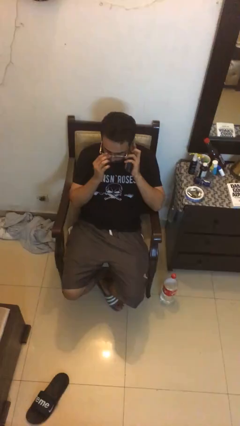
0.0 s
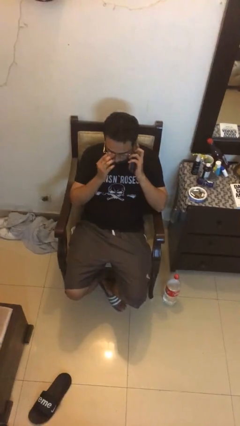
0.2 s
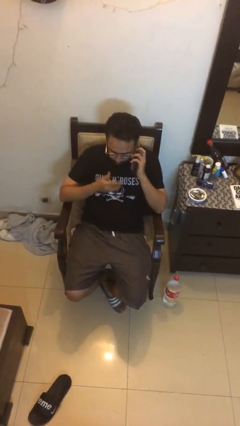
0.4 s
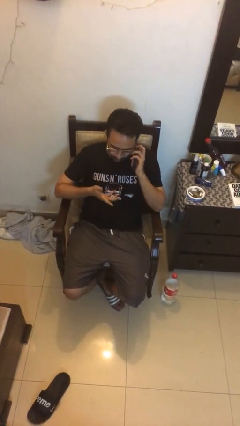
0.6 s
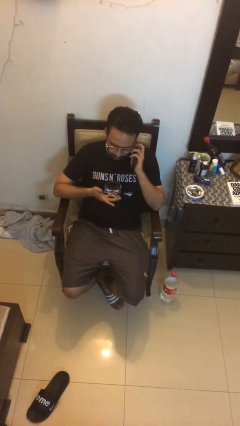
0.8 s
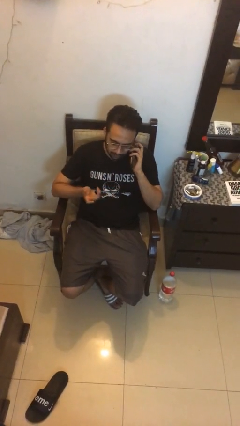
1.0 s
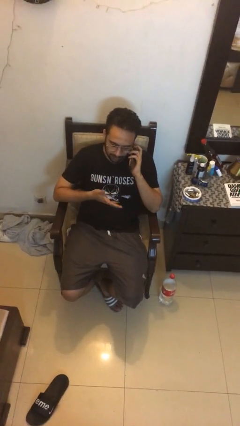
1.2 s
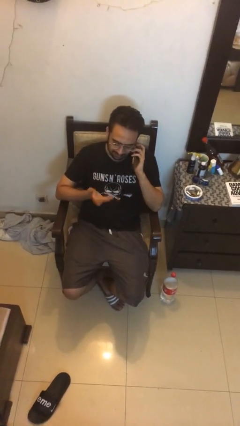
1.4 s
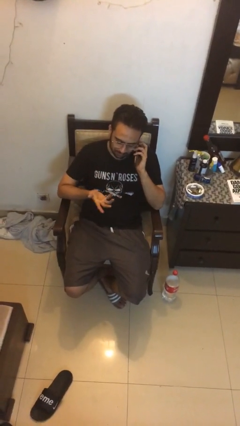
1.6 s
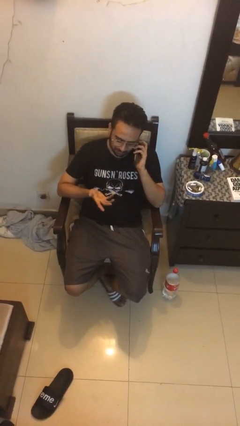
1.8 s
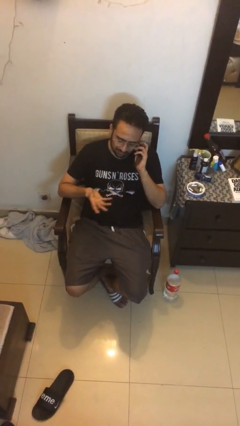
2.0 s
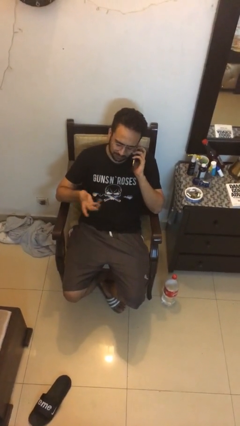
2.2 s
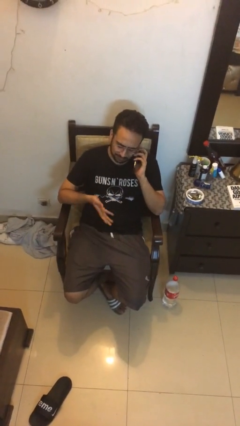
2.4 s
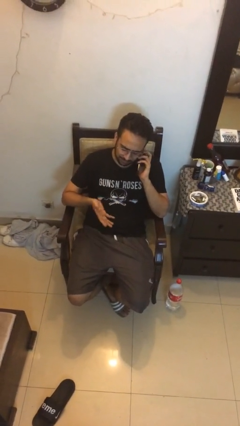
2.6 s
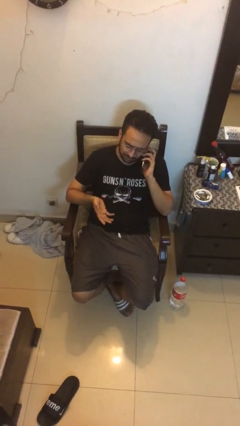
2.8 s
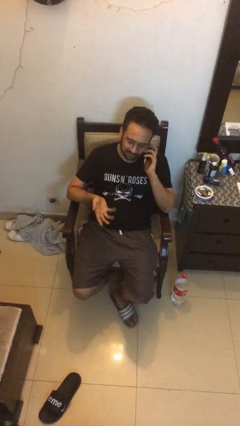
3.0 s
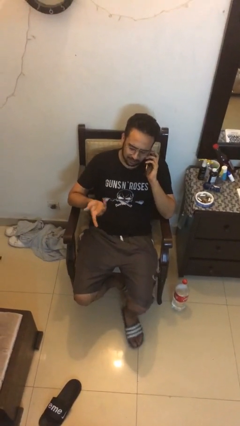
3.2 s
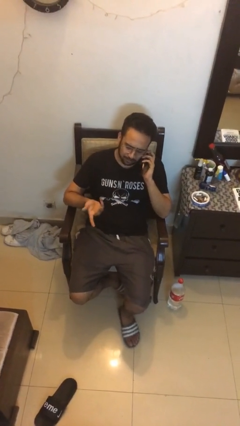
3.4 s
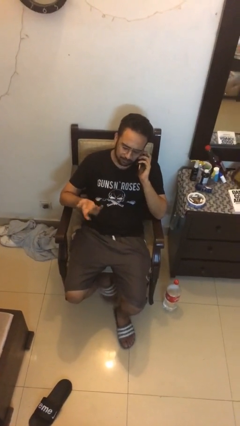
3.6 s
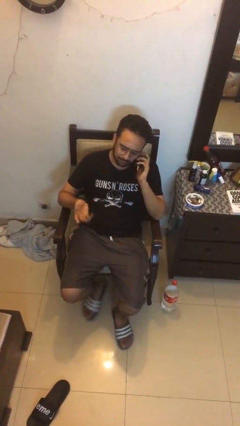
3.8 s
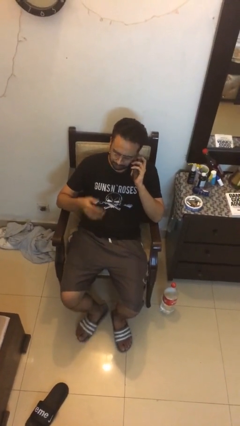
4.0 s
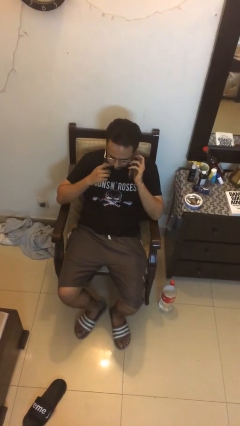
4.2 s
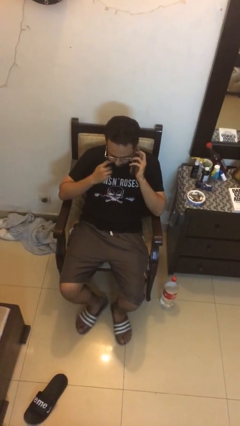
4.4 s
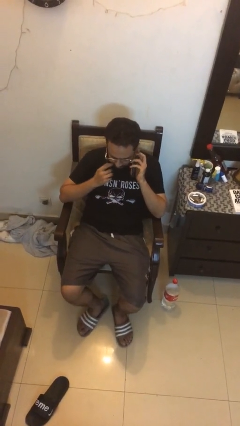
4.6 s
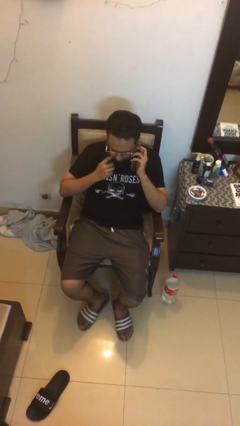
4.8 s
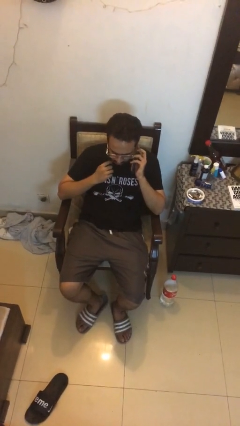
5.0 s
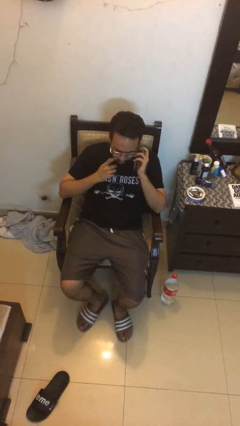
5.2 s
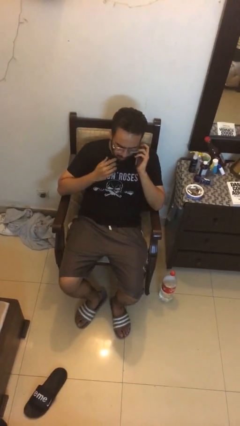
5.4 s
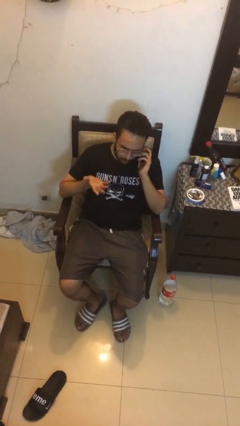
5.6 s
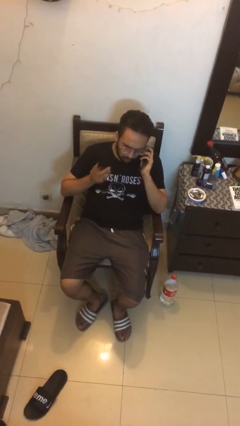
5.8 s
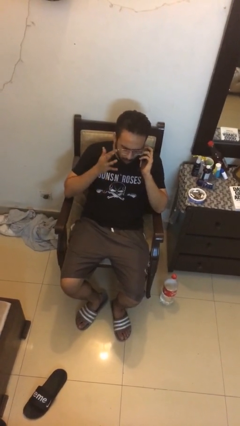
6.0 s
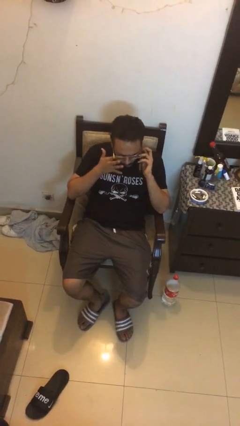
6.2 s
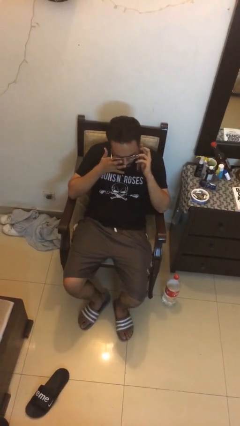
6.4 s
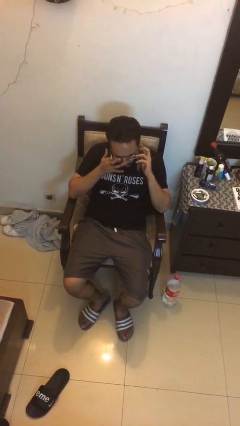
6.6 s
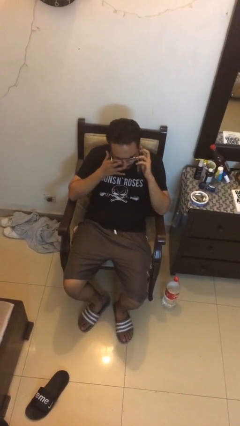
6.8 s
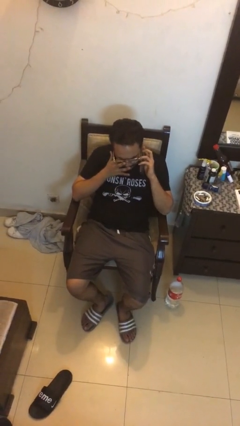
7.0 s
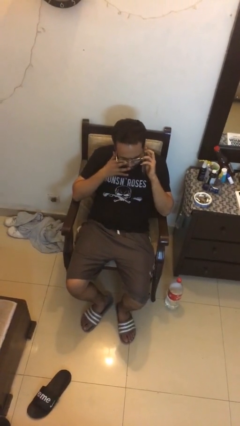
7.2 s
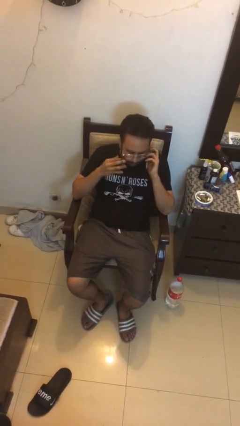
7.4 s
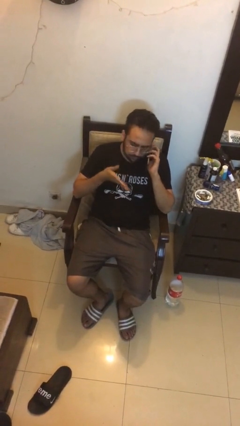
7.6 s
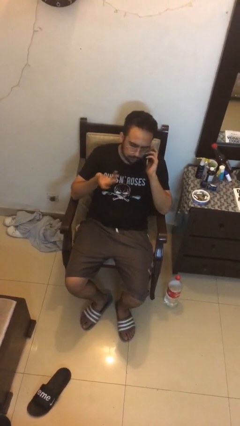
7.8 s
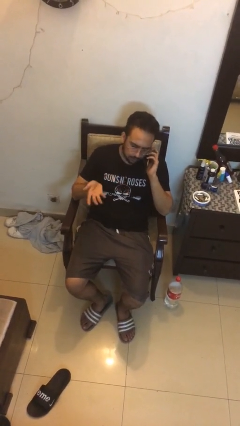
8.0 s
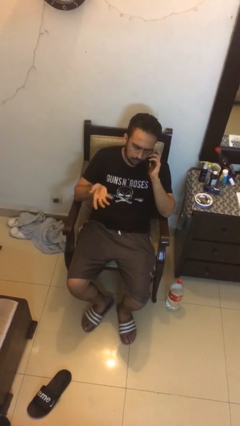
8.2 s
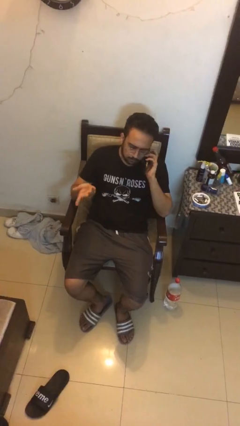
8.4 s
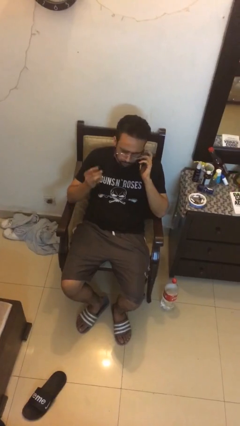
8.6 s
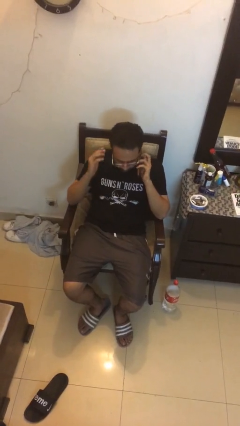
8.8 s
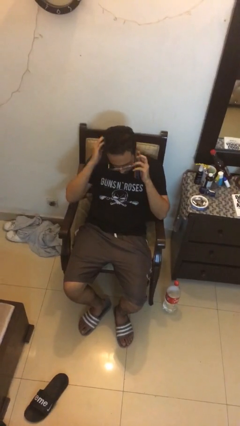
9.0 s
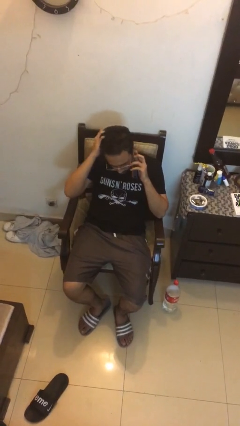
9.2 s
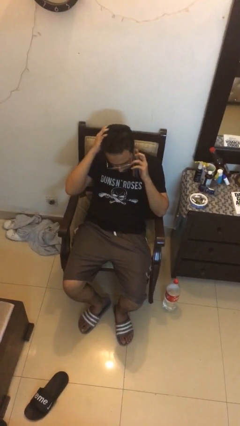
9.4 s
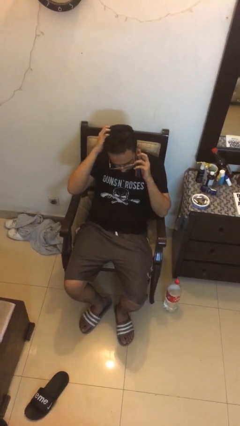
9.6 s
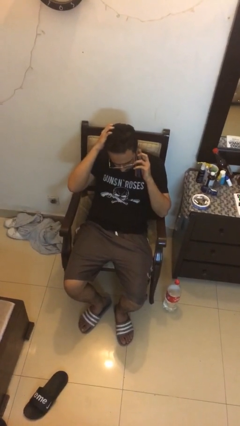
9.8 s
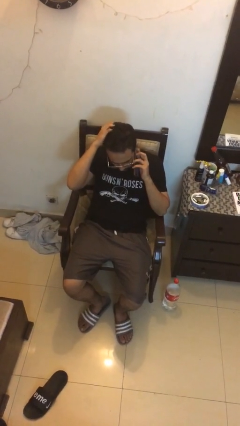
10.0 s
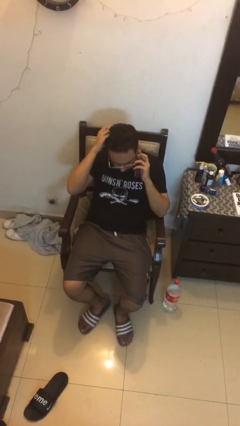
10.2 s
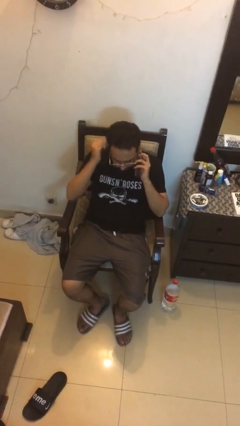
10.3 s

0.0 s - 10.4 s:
person talks on phone

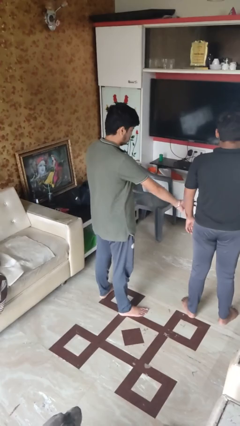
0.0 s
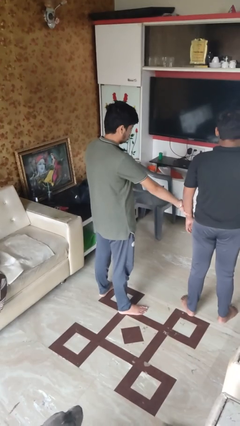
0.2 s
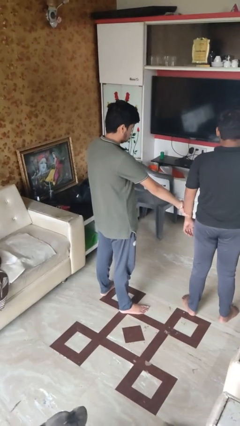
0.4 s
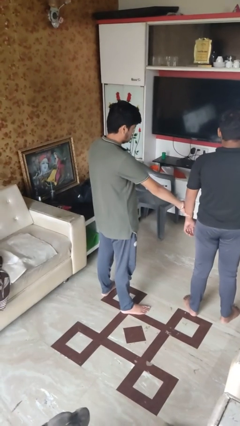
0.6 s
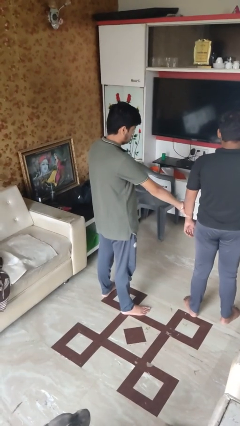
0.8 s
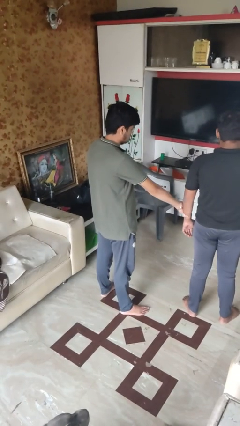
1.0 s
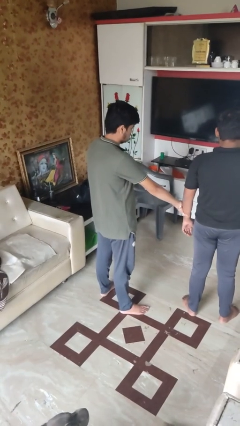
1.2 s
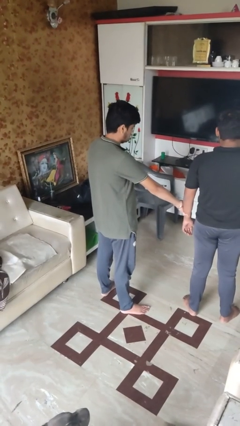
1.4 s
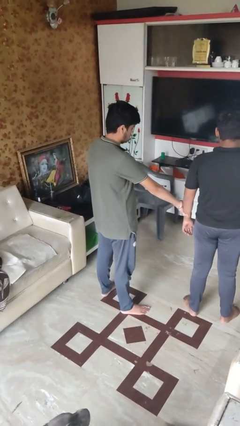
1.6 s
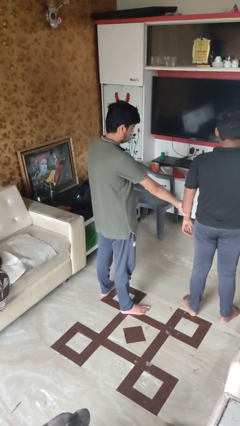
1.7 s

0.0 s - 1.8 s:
person grabs person by forearm

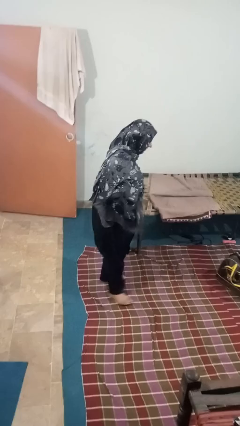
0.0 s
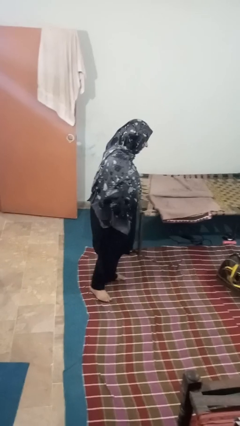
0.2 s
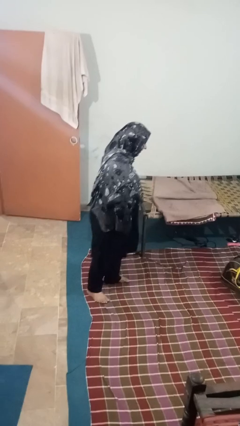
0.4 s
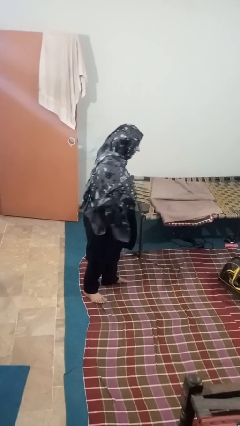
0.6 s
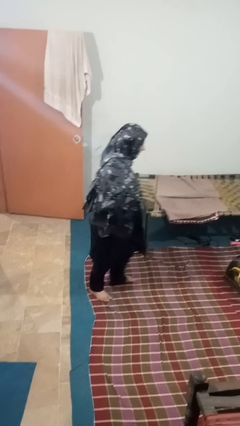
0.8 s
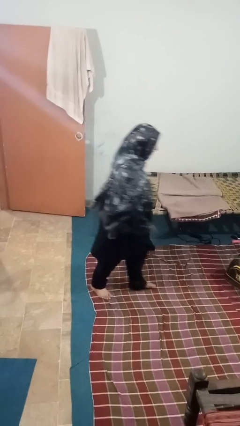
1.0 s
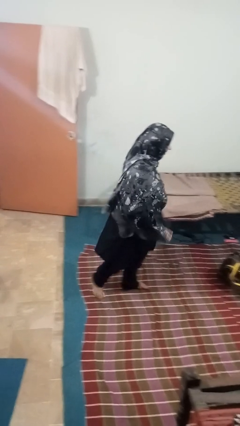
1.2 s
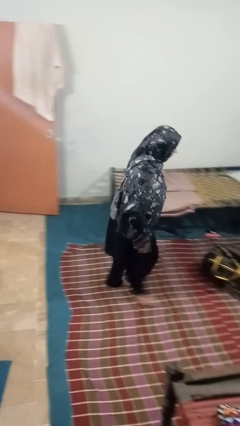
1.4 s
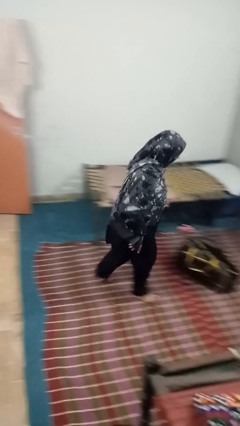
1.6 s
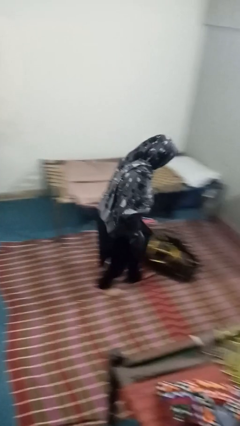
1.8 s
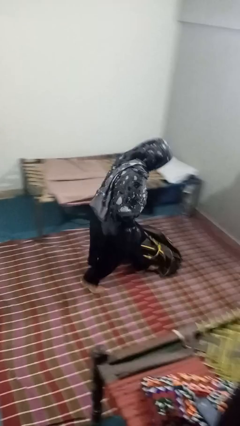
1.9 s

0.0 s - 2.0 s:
person trips on object on floor

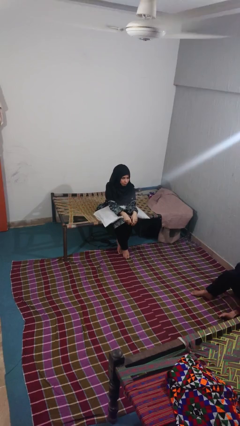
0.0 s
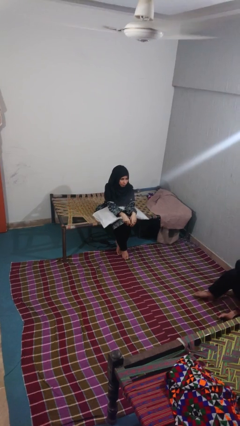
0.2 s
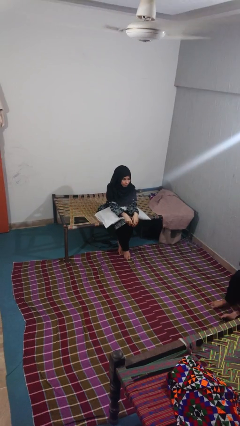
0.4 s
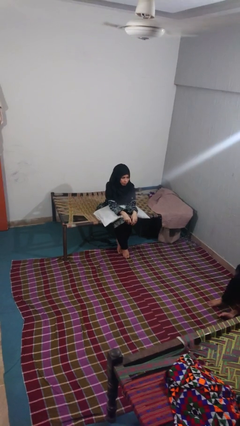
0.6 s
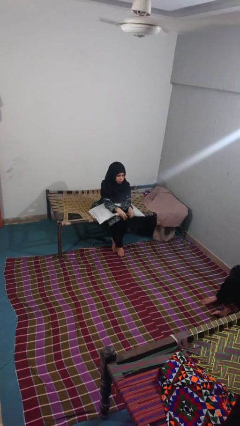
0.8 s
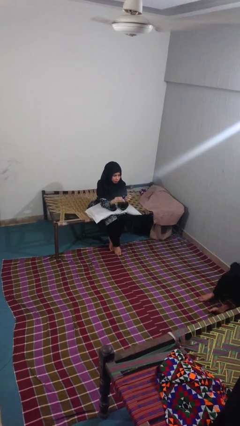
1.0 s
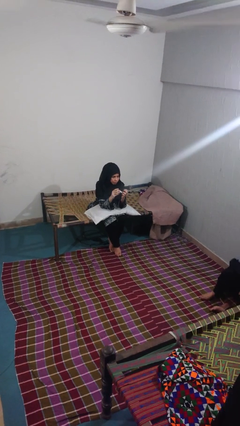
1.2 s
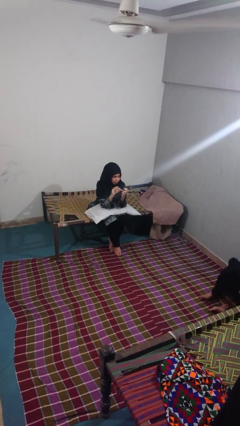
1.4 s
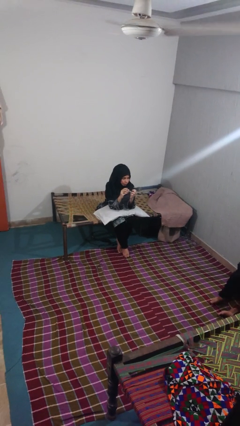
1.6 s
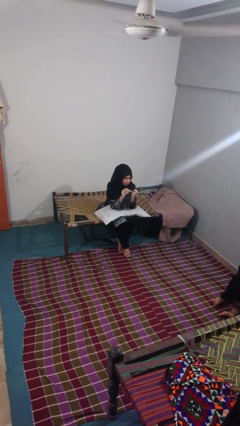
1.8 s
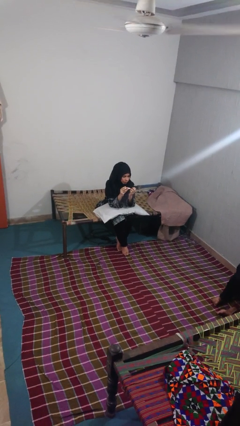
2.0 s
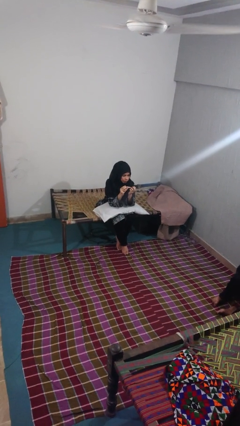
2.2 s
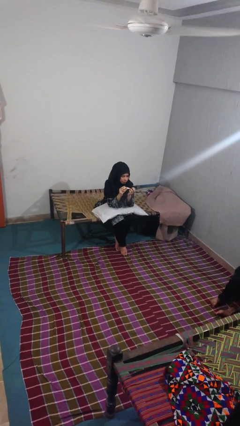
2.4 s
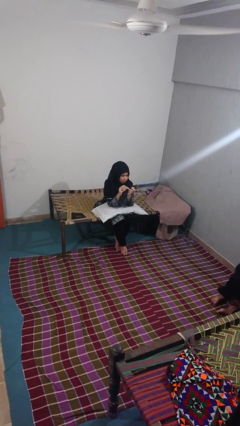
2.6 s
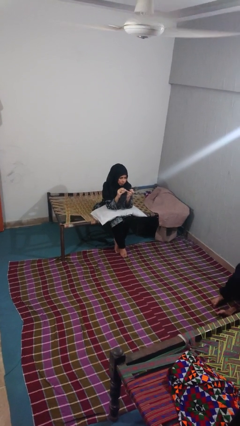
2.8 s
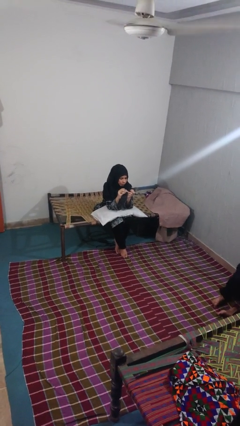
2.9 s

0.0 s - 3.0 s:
person clips fingernails

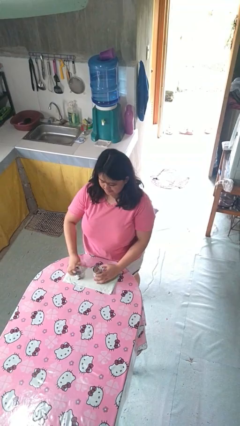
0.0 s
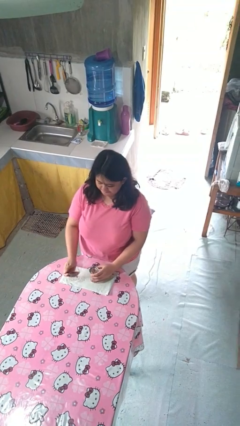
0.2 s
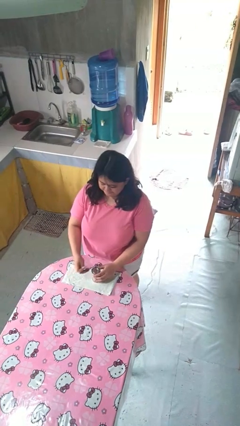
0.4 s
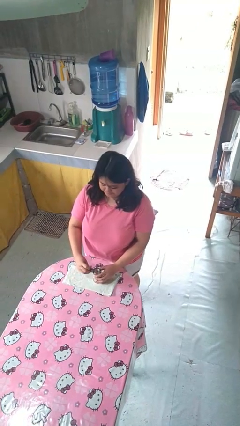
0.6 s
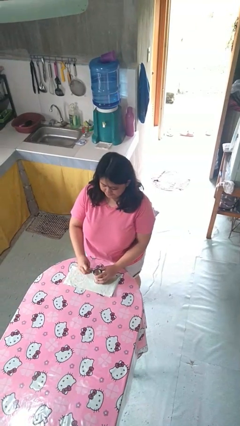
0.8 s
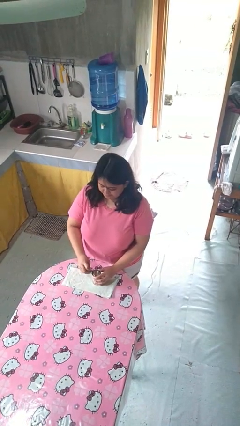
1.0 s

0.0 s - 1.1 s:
person opens can with can opener
